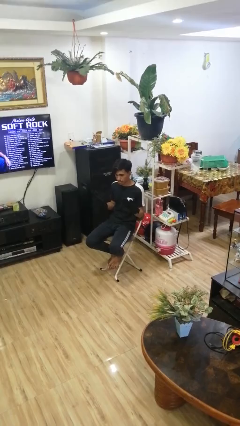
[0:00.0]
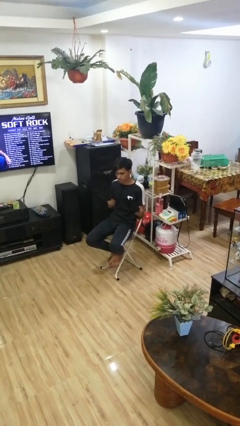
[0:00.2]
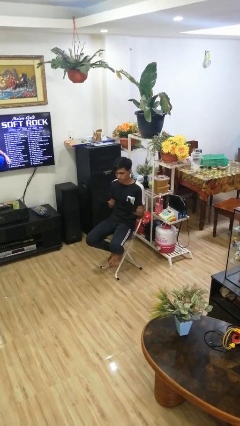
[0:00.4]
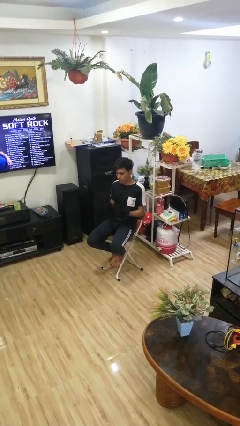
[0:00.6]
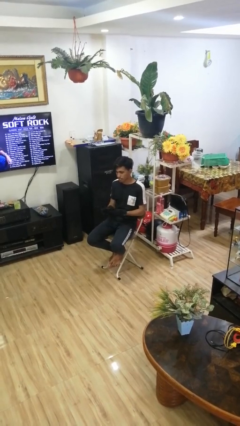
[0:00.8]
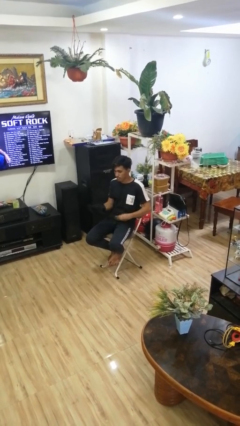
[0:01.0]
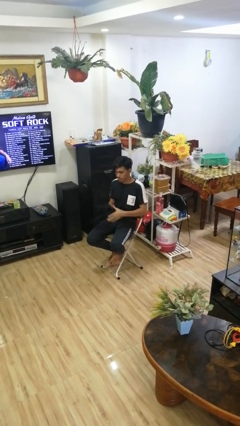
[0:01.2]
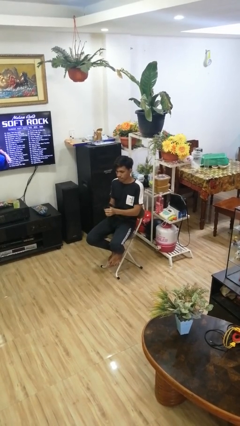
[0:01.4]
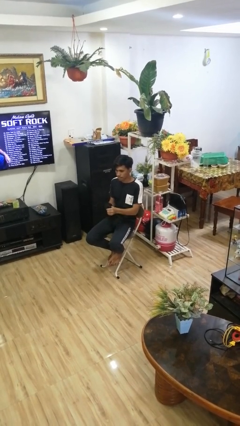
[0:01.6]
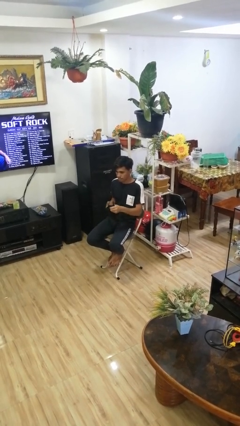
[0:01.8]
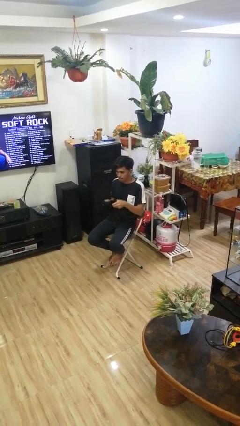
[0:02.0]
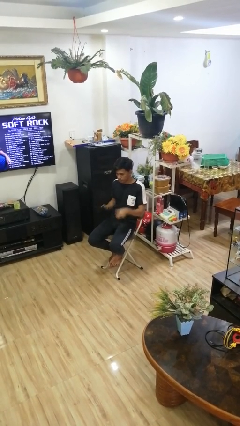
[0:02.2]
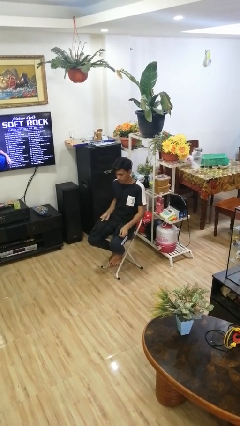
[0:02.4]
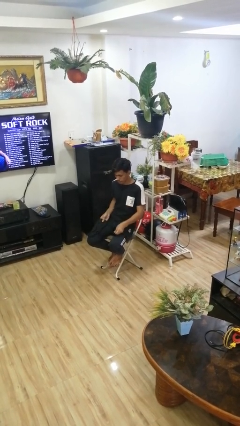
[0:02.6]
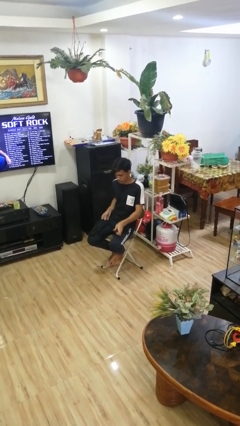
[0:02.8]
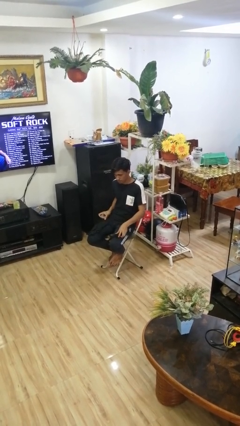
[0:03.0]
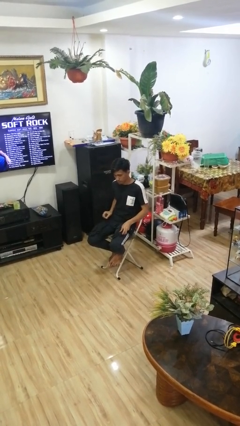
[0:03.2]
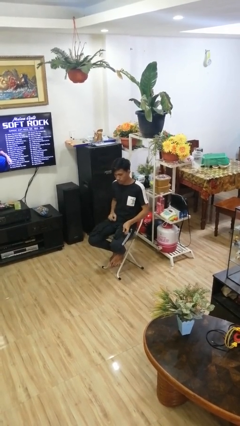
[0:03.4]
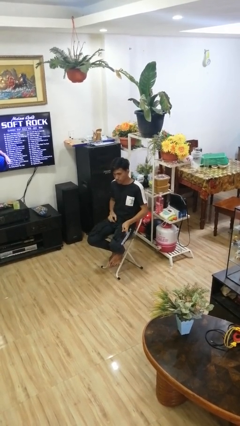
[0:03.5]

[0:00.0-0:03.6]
person takes off gloves

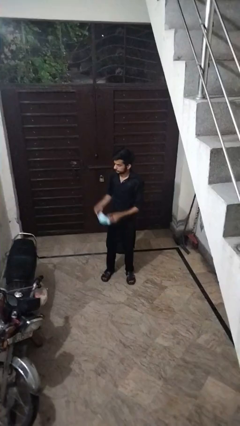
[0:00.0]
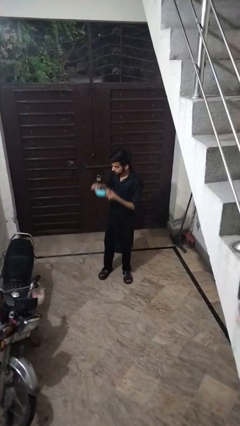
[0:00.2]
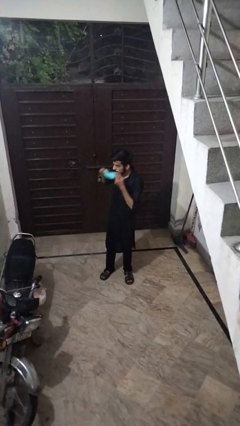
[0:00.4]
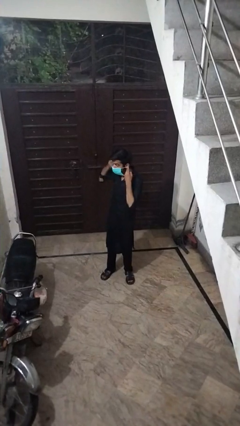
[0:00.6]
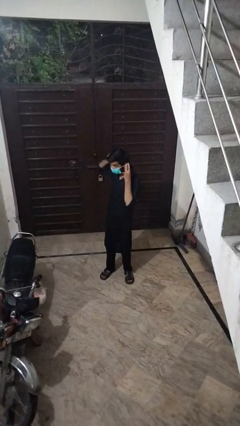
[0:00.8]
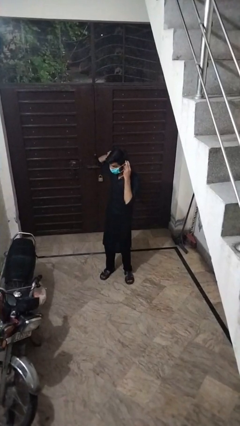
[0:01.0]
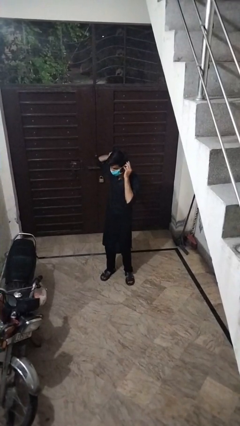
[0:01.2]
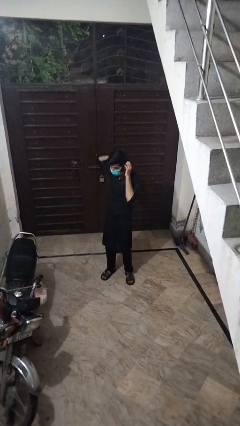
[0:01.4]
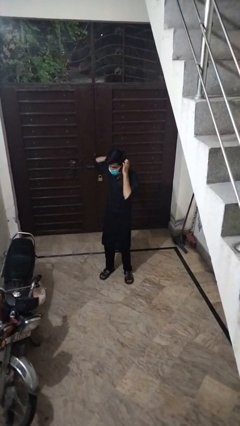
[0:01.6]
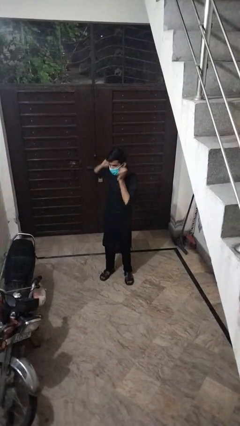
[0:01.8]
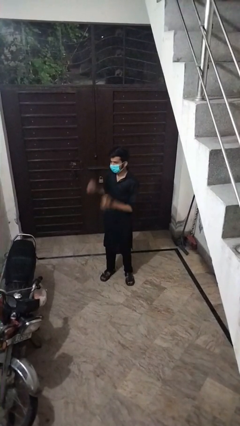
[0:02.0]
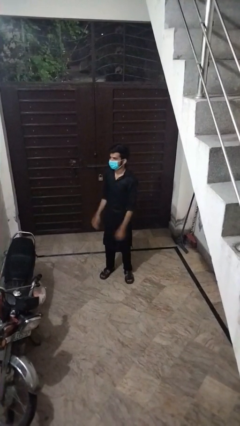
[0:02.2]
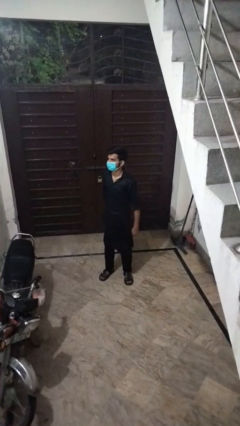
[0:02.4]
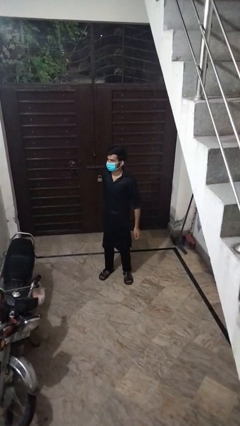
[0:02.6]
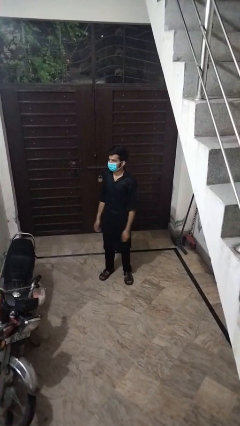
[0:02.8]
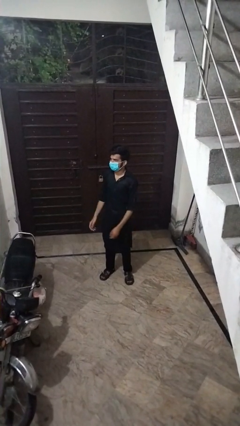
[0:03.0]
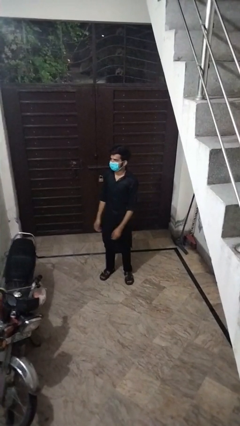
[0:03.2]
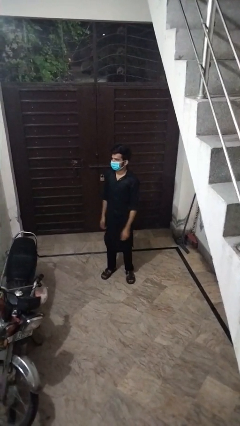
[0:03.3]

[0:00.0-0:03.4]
person puts on facemask

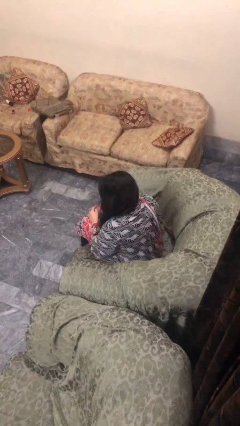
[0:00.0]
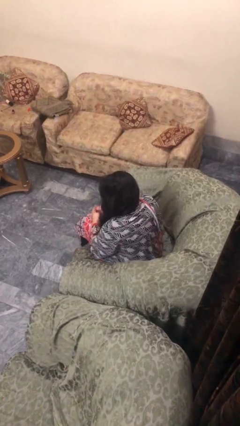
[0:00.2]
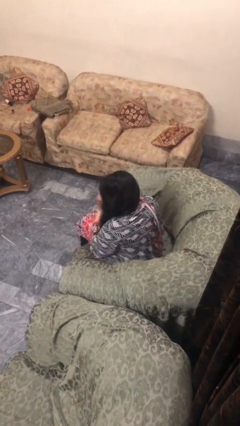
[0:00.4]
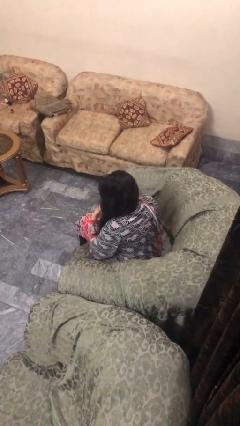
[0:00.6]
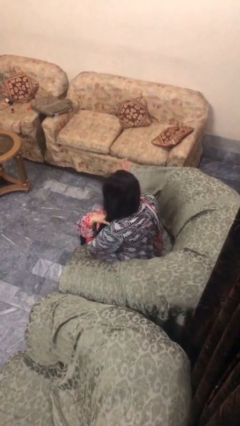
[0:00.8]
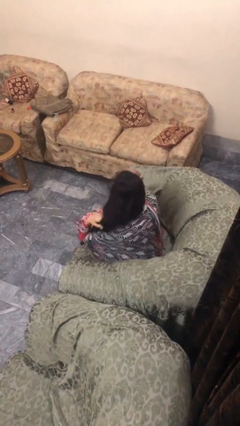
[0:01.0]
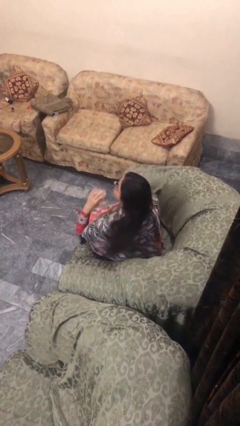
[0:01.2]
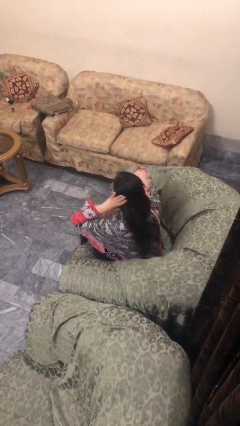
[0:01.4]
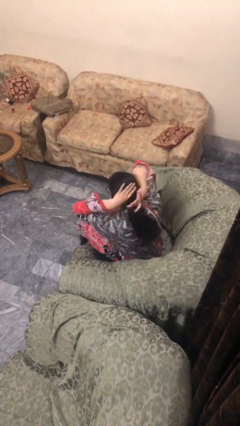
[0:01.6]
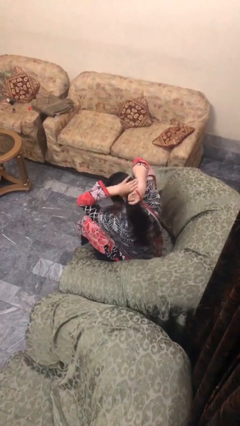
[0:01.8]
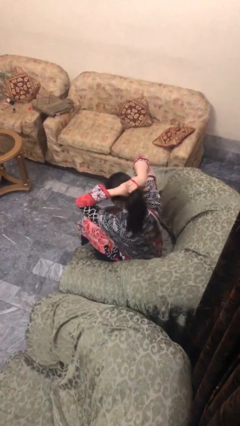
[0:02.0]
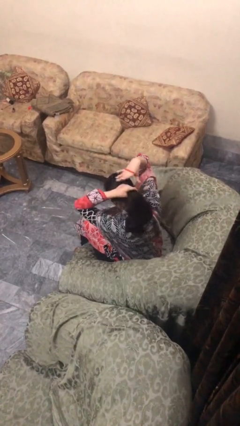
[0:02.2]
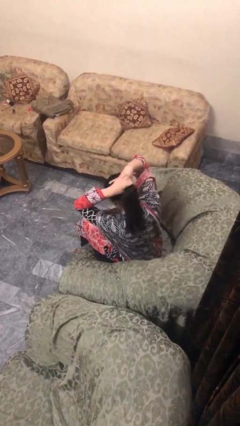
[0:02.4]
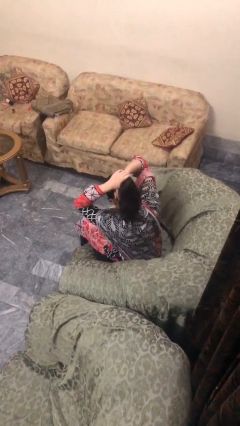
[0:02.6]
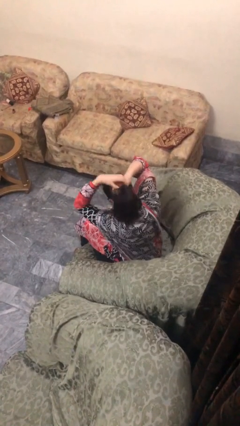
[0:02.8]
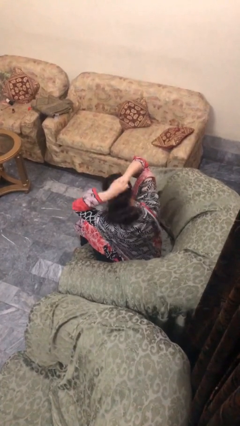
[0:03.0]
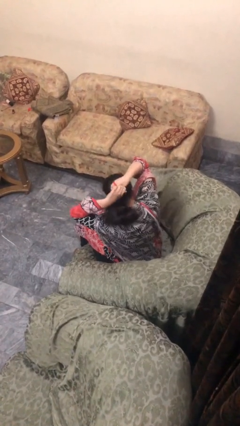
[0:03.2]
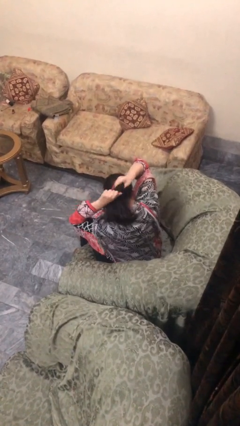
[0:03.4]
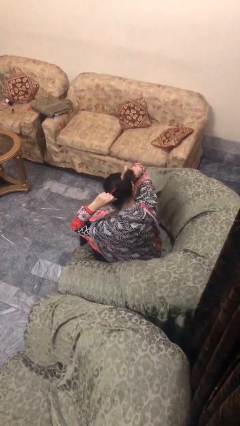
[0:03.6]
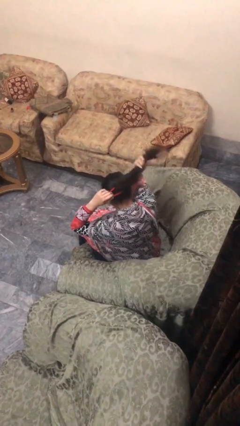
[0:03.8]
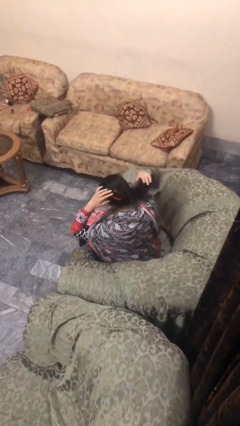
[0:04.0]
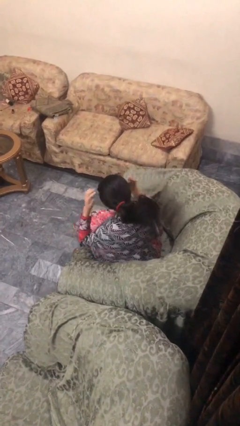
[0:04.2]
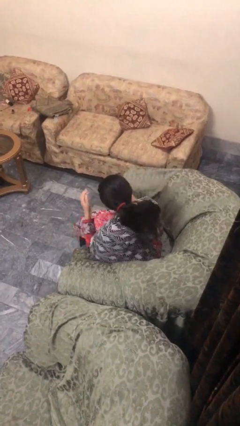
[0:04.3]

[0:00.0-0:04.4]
person puts hair in ponytail

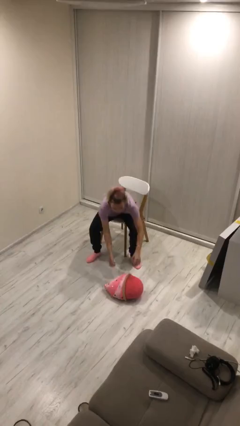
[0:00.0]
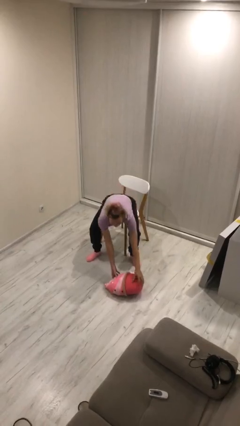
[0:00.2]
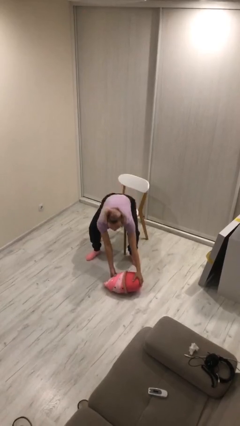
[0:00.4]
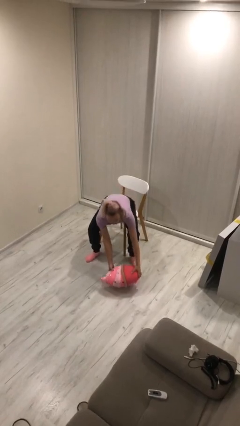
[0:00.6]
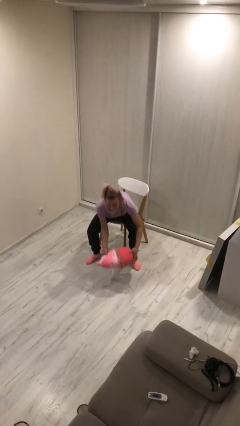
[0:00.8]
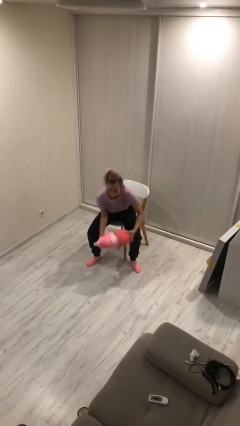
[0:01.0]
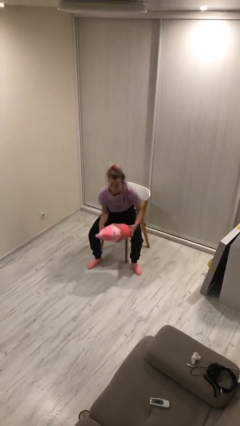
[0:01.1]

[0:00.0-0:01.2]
person picks up object from floor

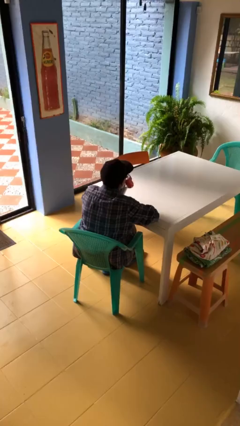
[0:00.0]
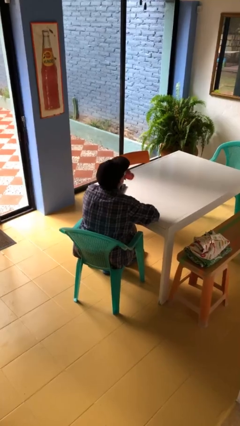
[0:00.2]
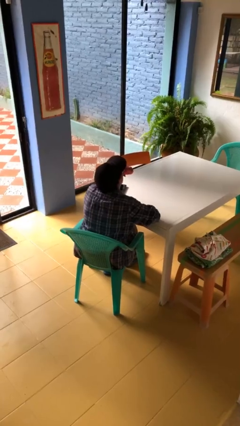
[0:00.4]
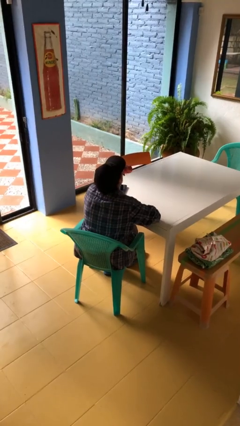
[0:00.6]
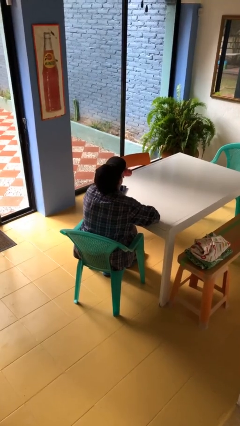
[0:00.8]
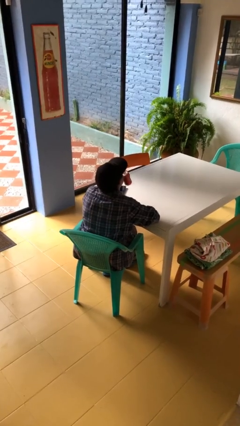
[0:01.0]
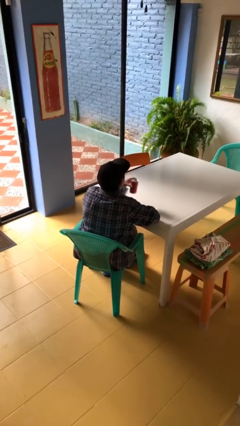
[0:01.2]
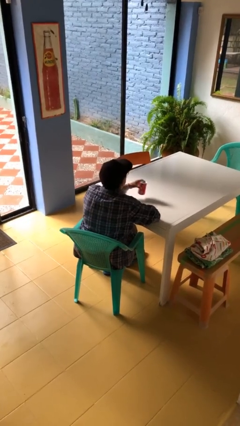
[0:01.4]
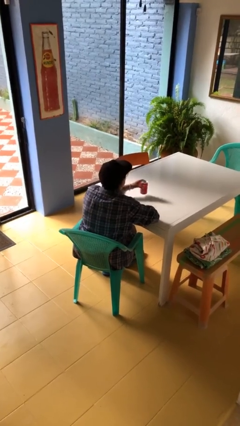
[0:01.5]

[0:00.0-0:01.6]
person drinks from beverage can

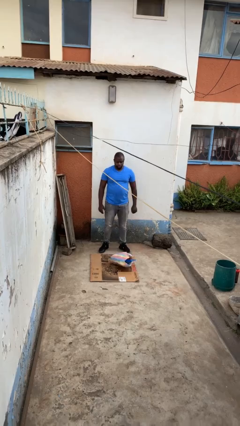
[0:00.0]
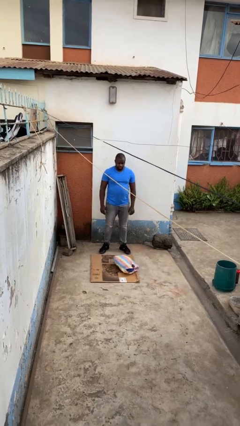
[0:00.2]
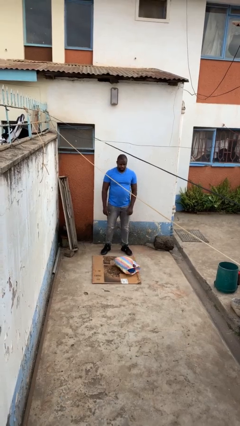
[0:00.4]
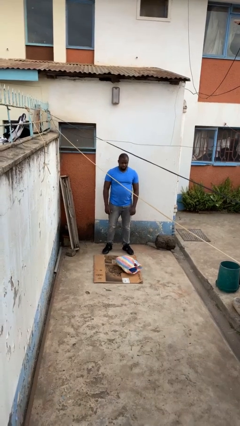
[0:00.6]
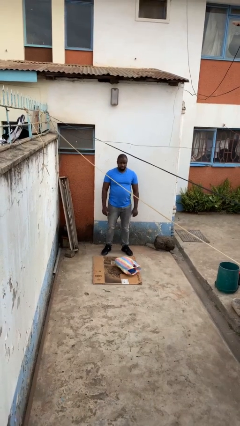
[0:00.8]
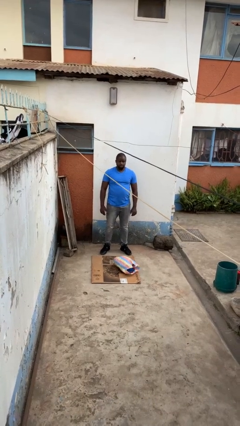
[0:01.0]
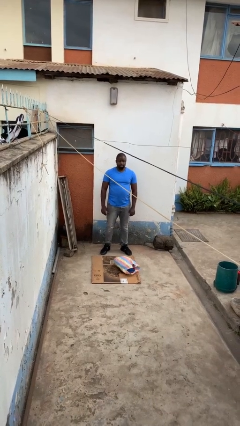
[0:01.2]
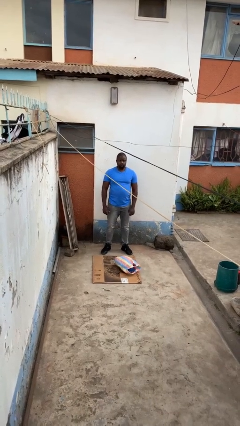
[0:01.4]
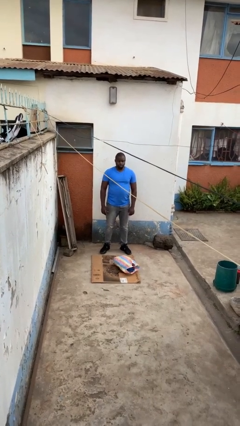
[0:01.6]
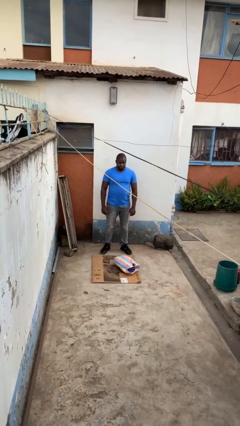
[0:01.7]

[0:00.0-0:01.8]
person drops object

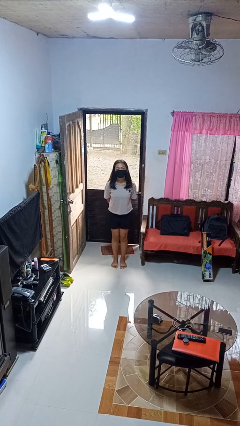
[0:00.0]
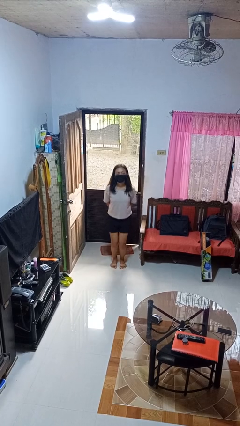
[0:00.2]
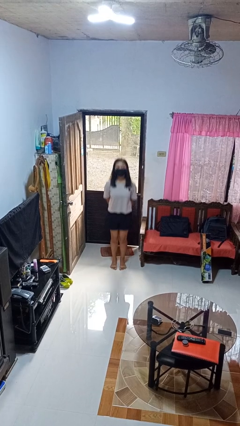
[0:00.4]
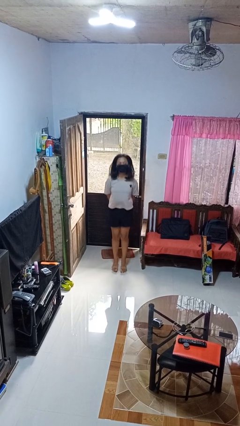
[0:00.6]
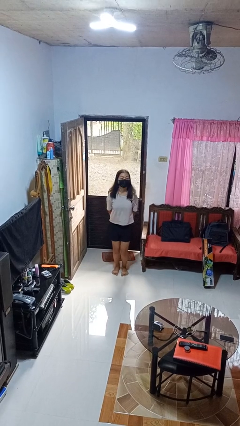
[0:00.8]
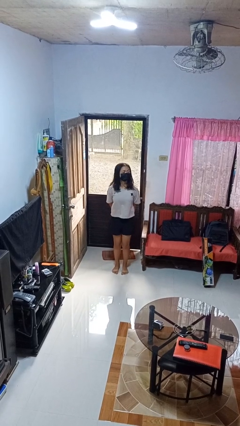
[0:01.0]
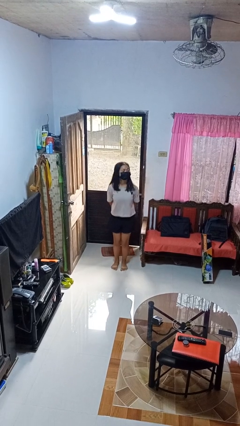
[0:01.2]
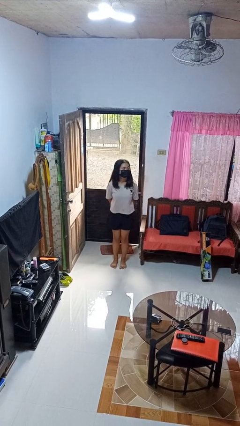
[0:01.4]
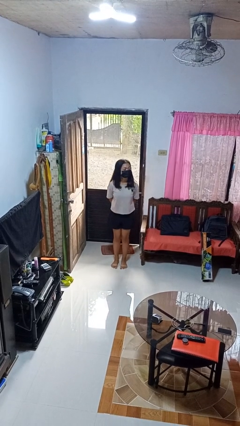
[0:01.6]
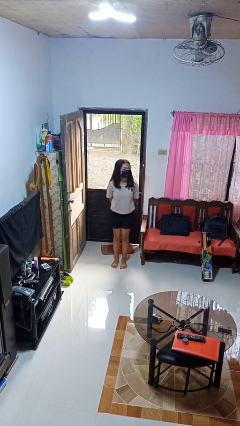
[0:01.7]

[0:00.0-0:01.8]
person jumps
